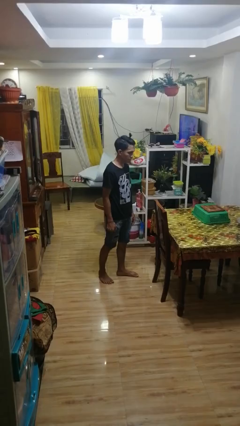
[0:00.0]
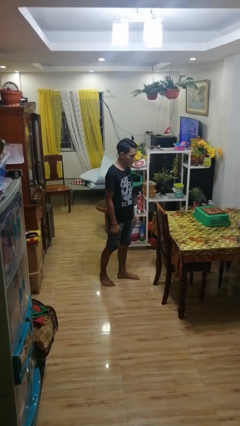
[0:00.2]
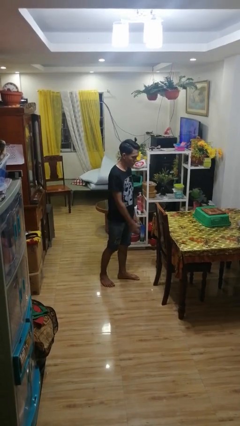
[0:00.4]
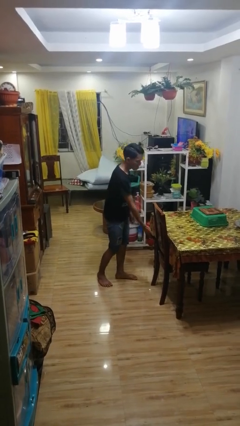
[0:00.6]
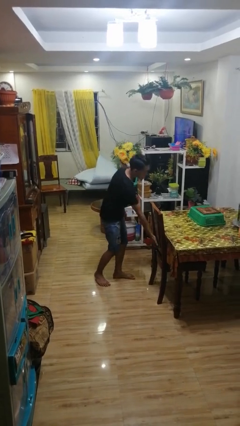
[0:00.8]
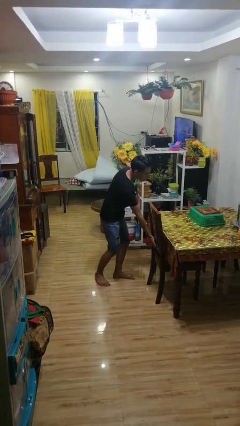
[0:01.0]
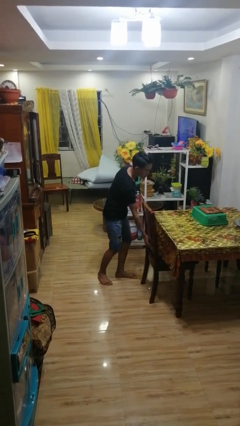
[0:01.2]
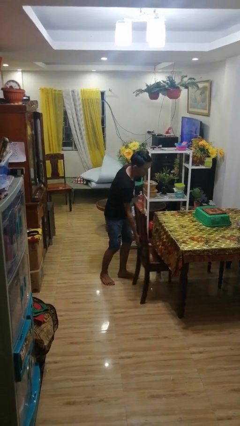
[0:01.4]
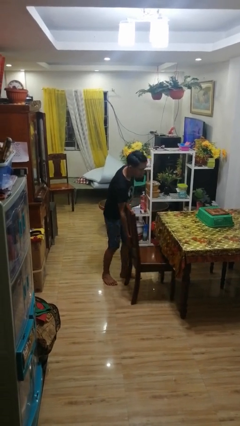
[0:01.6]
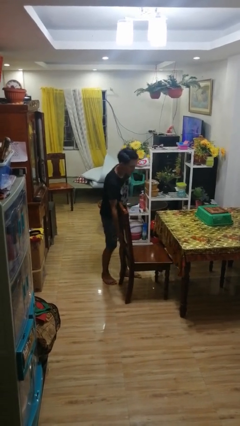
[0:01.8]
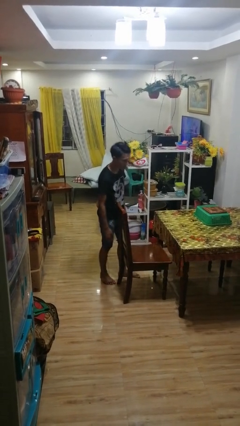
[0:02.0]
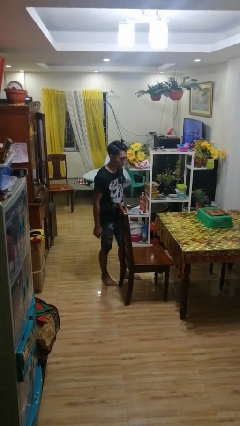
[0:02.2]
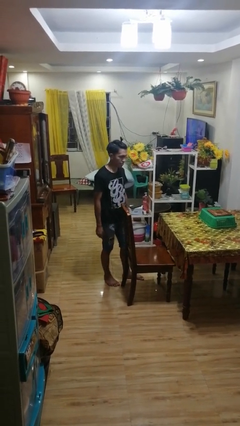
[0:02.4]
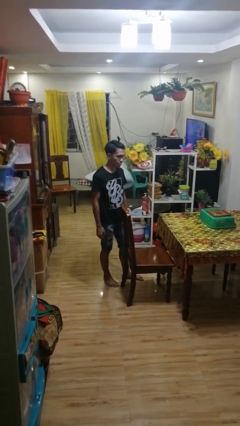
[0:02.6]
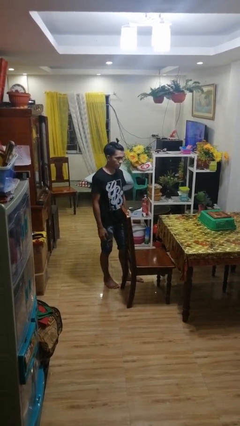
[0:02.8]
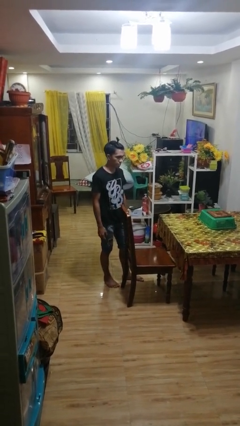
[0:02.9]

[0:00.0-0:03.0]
person pulls out chair

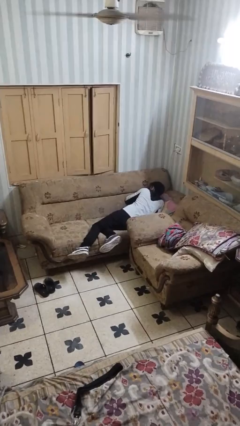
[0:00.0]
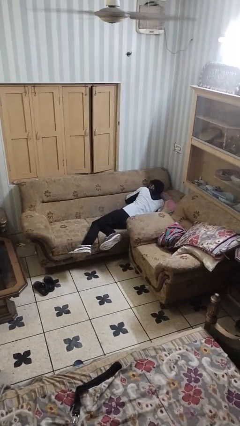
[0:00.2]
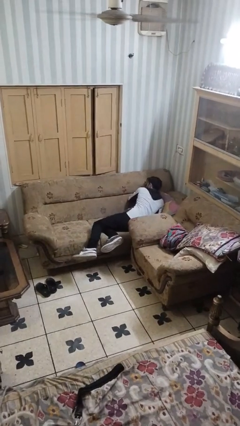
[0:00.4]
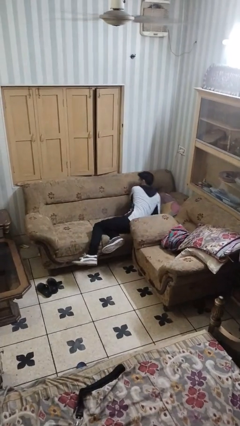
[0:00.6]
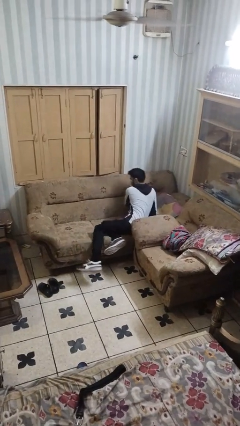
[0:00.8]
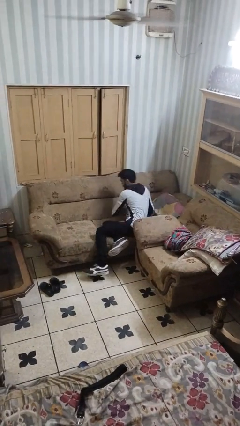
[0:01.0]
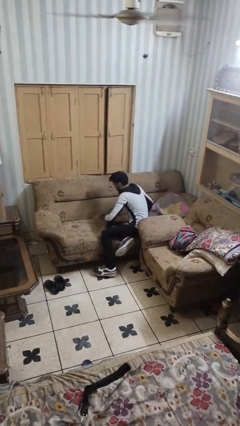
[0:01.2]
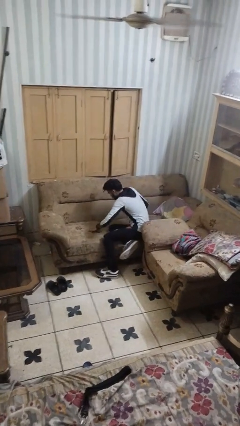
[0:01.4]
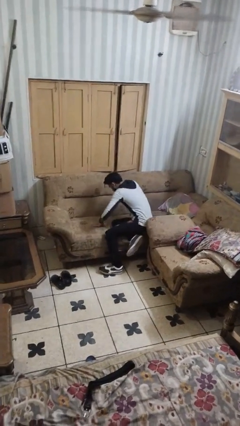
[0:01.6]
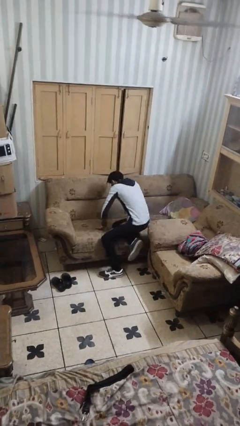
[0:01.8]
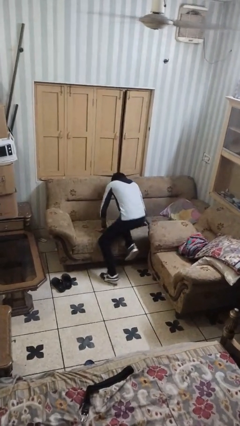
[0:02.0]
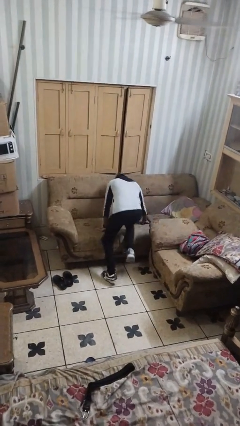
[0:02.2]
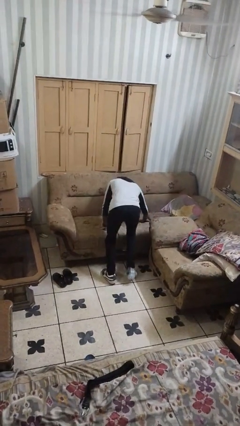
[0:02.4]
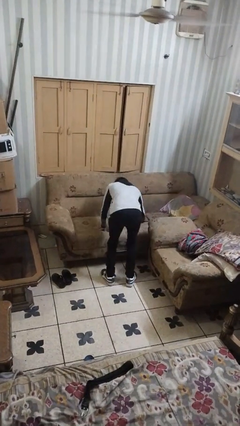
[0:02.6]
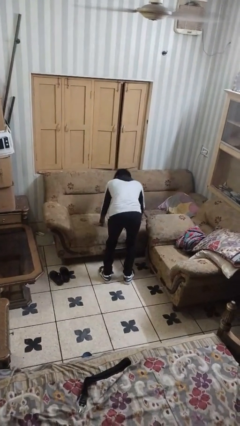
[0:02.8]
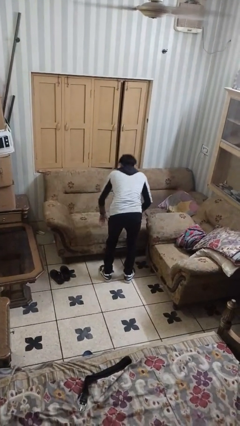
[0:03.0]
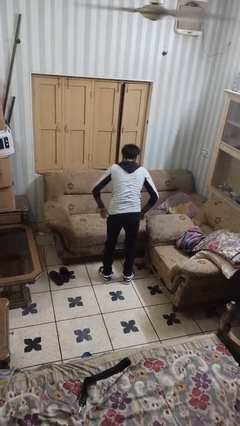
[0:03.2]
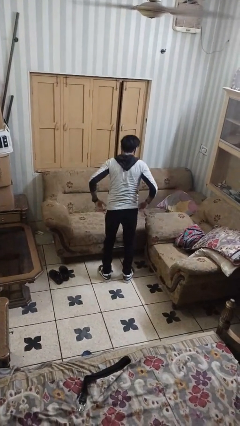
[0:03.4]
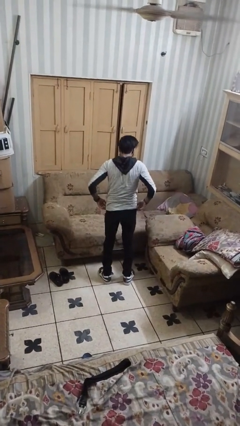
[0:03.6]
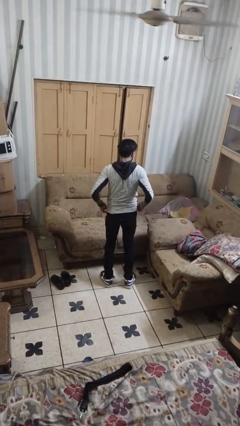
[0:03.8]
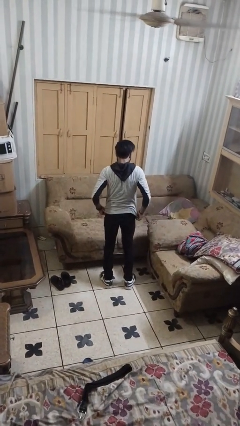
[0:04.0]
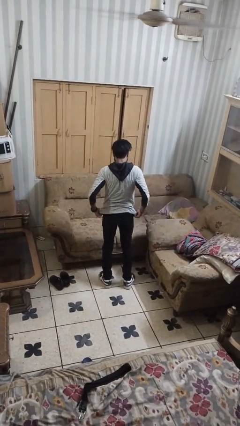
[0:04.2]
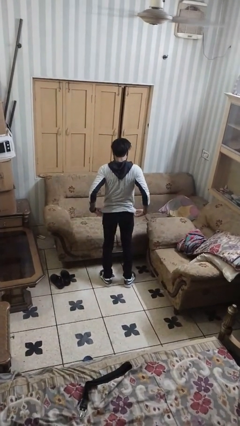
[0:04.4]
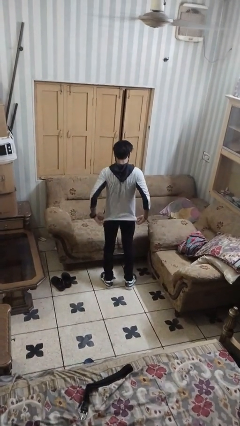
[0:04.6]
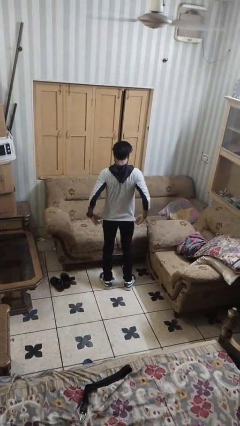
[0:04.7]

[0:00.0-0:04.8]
person stands up

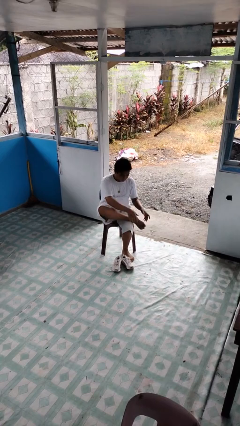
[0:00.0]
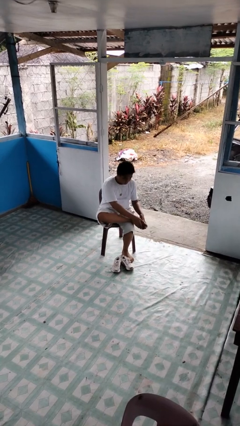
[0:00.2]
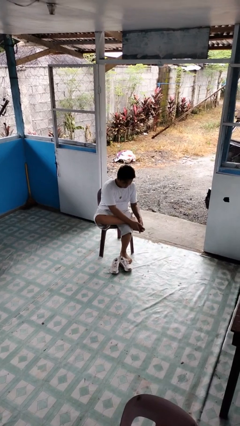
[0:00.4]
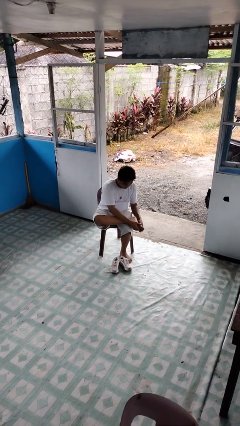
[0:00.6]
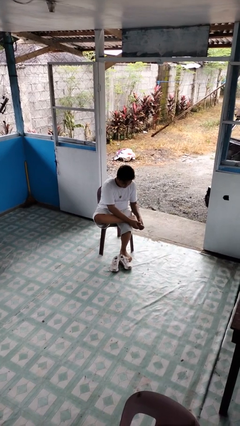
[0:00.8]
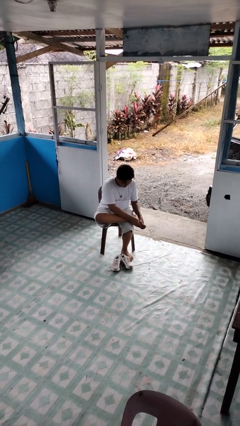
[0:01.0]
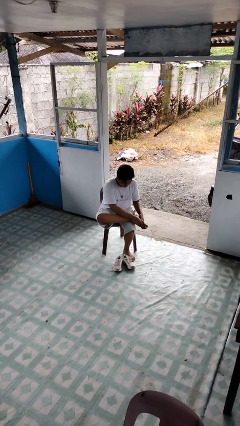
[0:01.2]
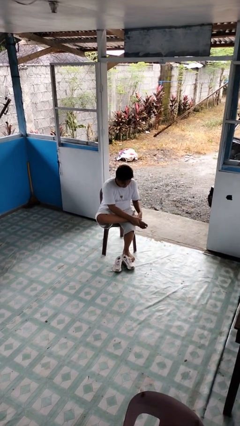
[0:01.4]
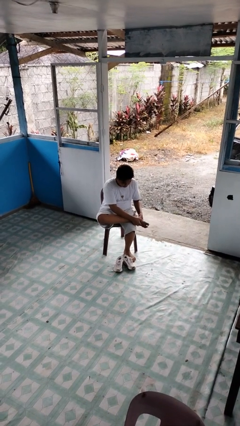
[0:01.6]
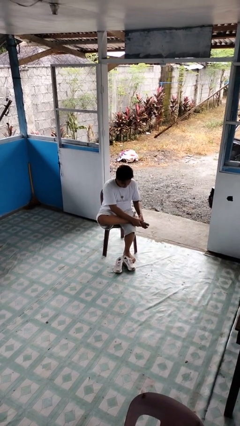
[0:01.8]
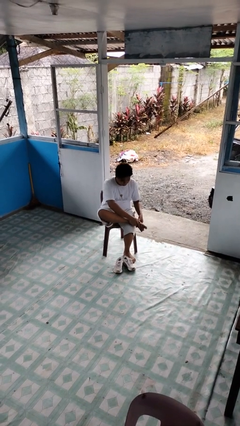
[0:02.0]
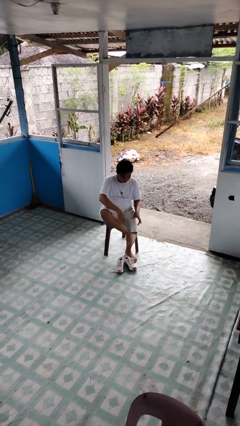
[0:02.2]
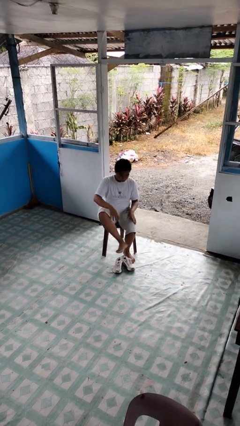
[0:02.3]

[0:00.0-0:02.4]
person rubs foot

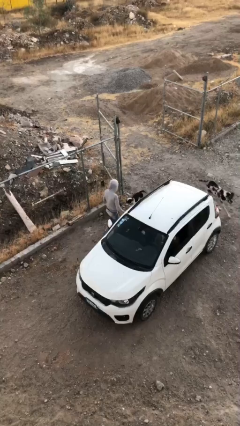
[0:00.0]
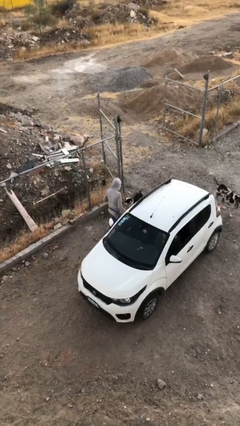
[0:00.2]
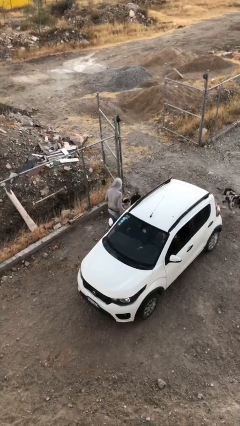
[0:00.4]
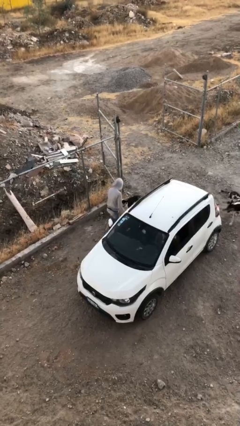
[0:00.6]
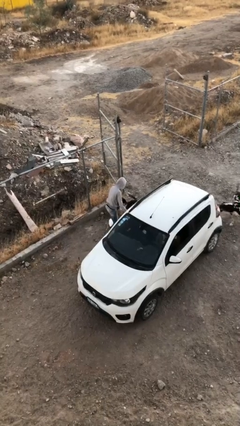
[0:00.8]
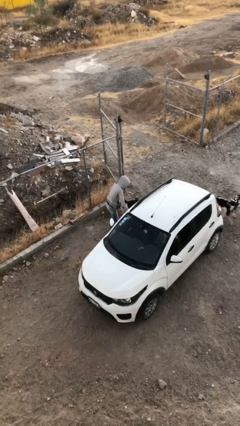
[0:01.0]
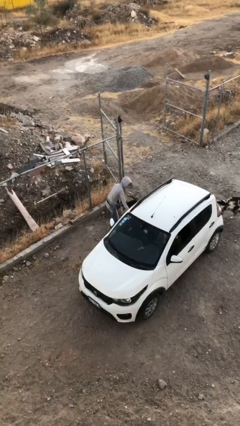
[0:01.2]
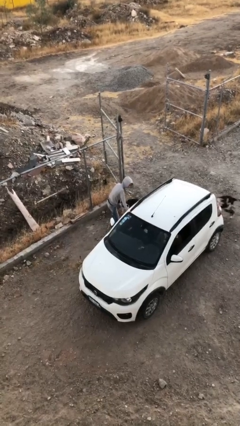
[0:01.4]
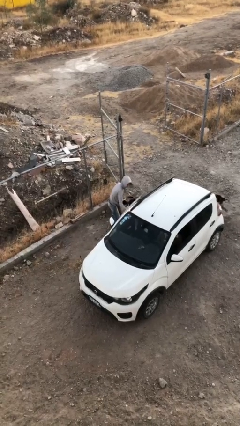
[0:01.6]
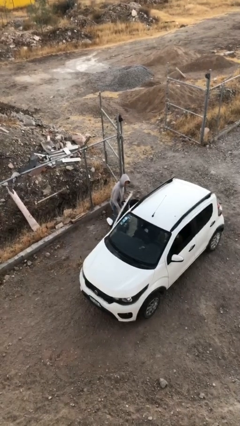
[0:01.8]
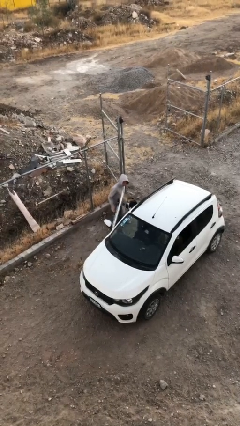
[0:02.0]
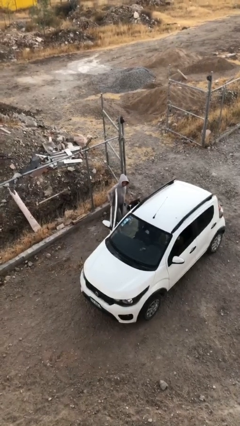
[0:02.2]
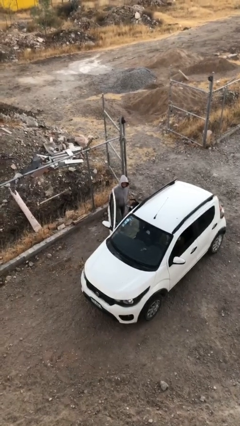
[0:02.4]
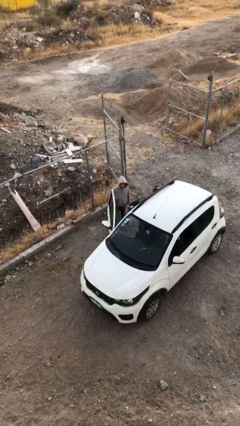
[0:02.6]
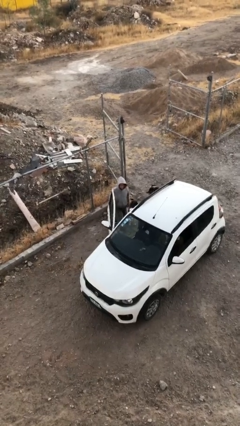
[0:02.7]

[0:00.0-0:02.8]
person opens car door

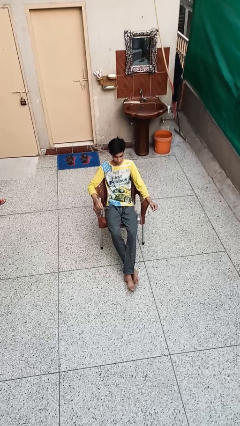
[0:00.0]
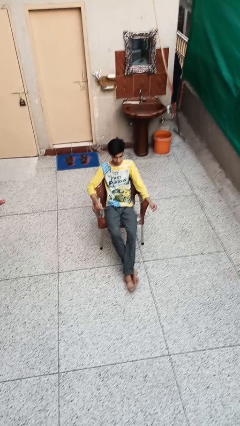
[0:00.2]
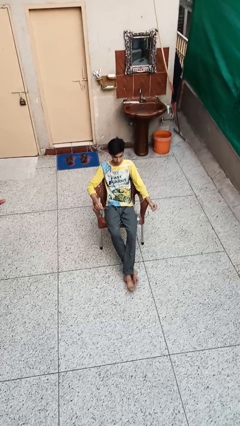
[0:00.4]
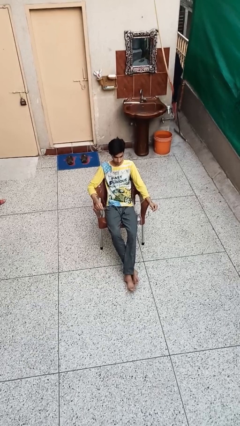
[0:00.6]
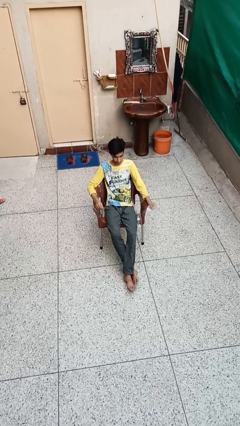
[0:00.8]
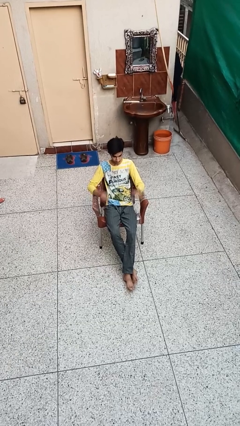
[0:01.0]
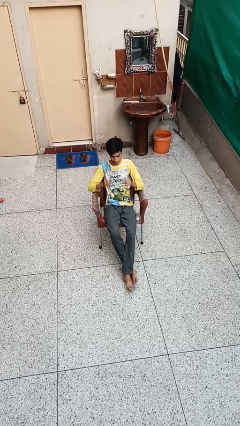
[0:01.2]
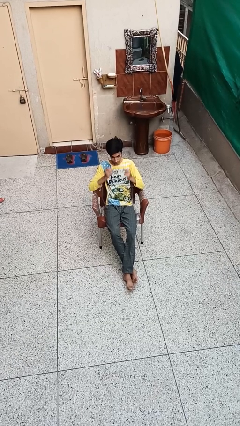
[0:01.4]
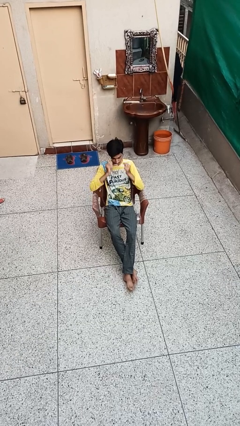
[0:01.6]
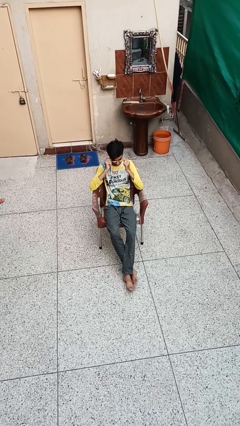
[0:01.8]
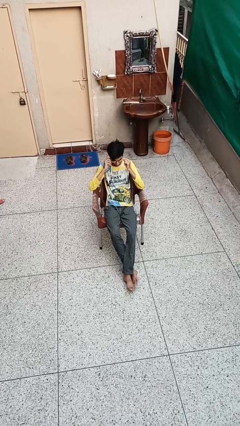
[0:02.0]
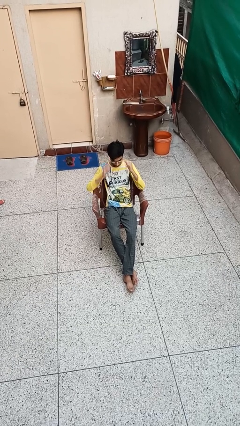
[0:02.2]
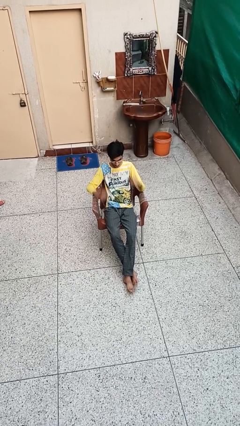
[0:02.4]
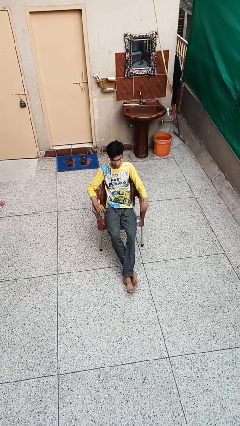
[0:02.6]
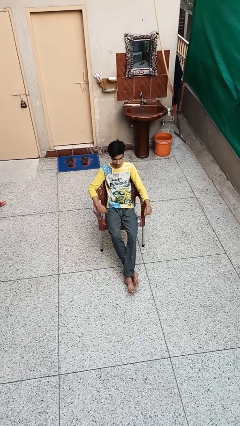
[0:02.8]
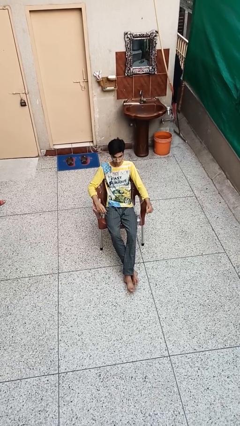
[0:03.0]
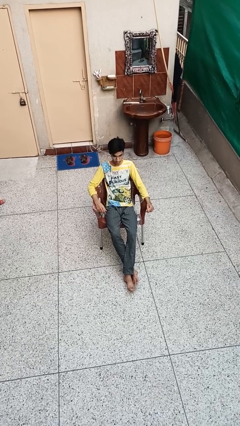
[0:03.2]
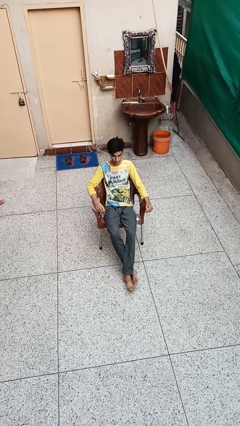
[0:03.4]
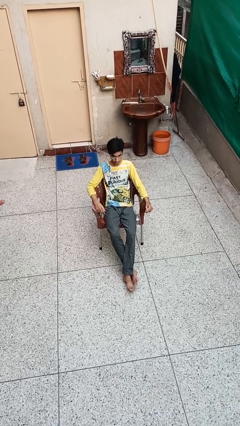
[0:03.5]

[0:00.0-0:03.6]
person puts on glasses

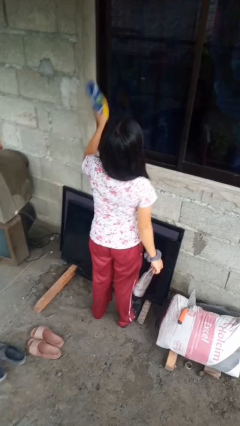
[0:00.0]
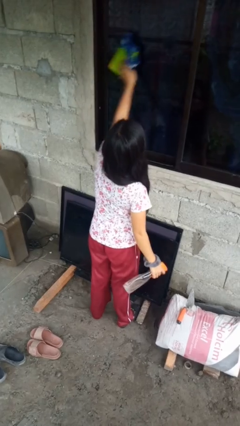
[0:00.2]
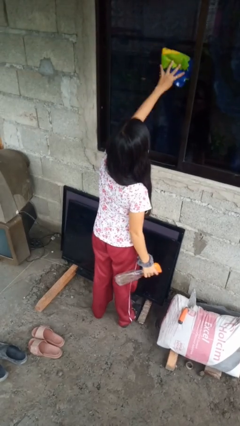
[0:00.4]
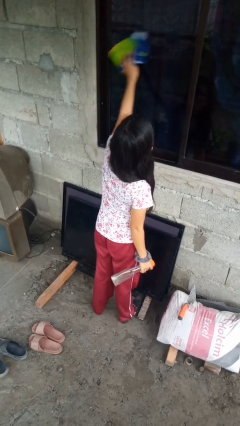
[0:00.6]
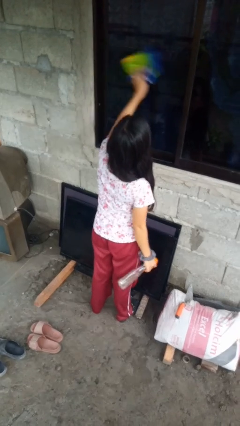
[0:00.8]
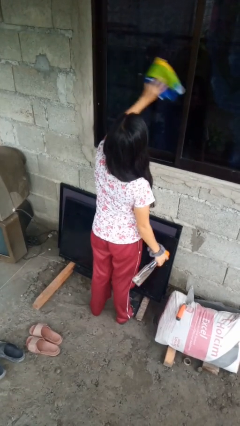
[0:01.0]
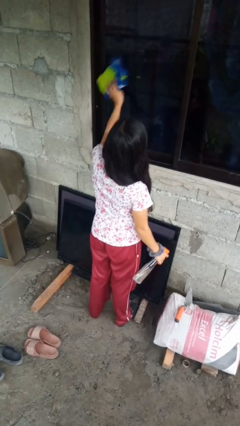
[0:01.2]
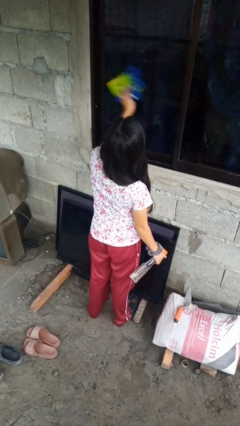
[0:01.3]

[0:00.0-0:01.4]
person washes window
